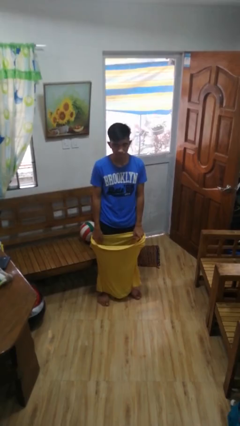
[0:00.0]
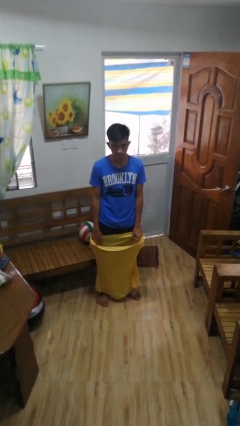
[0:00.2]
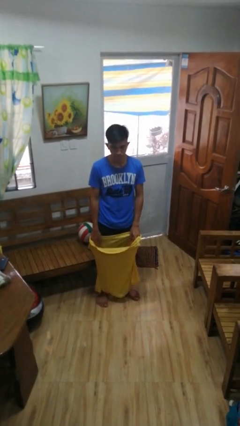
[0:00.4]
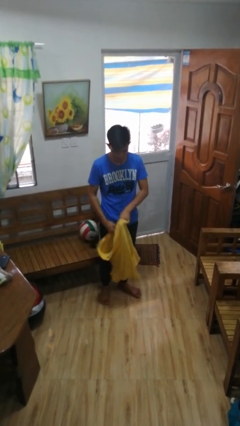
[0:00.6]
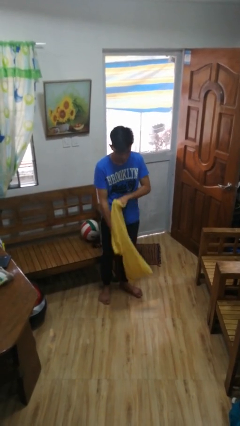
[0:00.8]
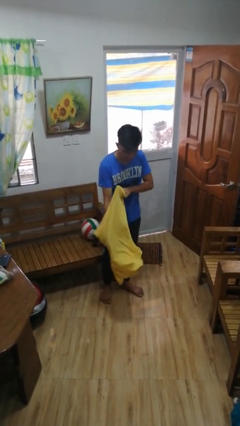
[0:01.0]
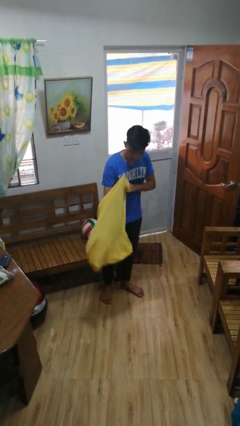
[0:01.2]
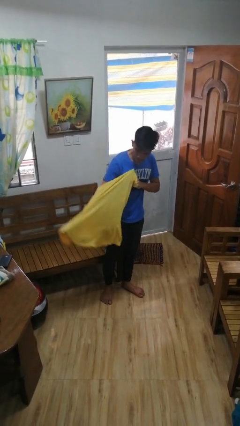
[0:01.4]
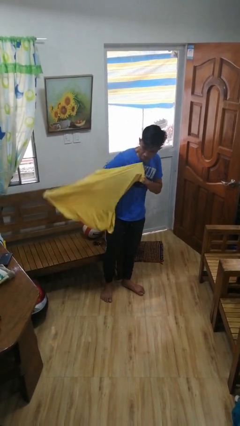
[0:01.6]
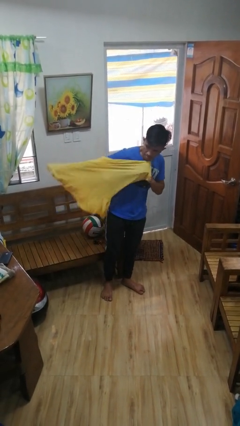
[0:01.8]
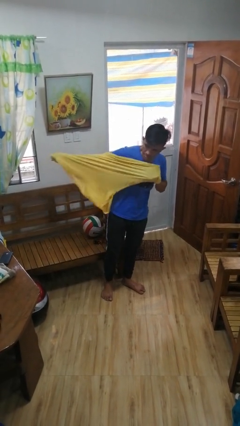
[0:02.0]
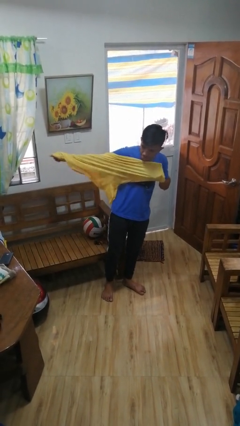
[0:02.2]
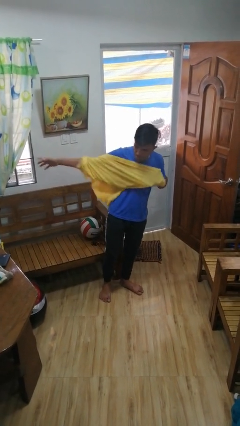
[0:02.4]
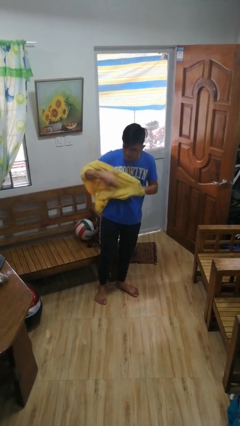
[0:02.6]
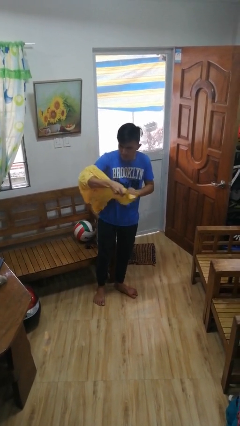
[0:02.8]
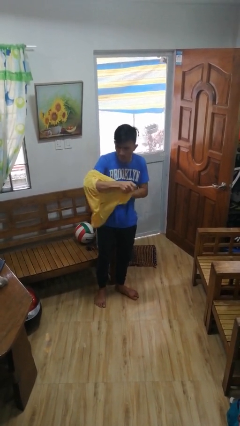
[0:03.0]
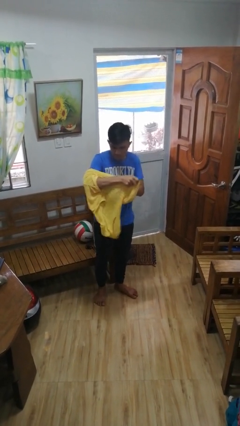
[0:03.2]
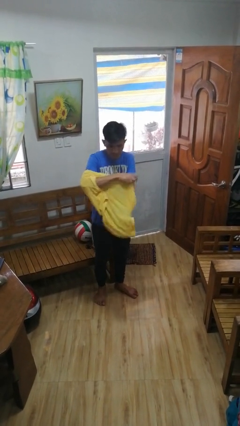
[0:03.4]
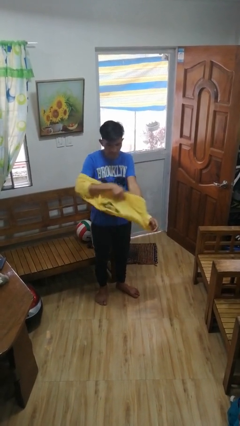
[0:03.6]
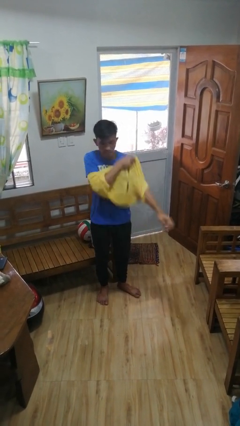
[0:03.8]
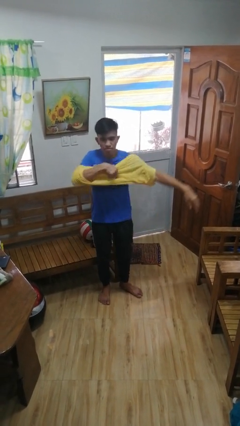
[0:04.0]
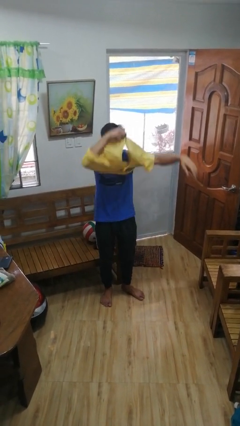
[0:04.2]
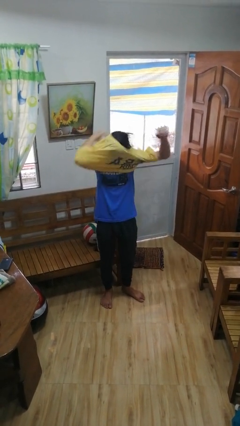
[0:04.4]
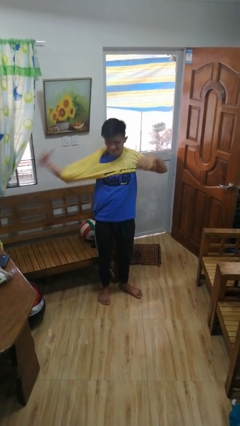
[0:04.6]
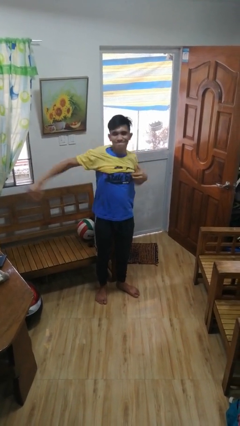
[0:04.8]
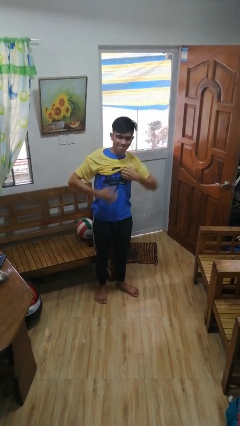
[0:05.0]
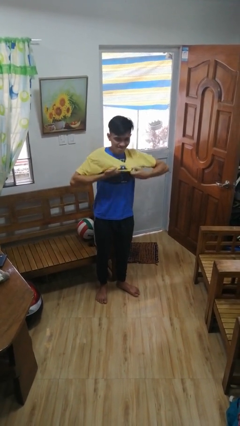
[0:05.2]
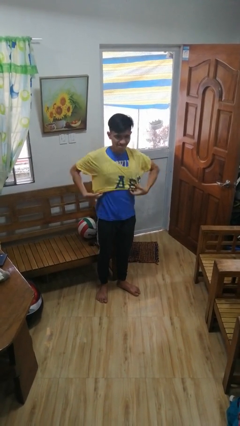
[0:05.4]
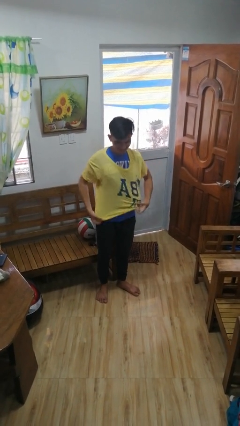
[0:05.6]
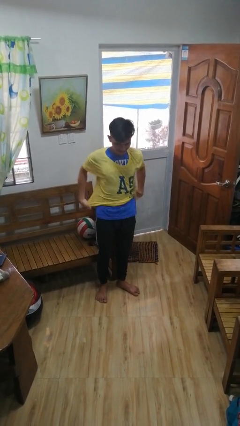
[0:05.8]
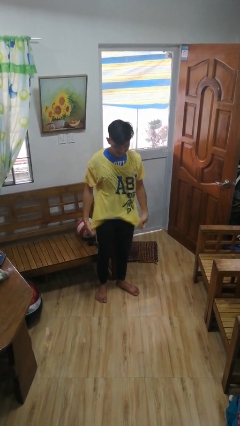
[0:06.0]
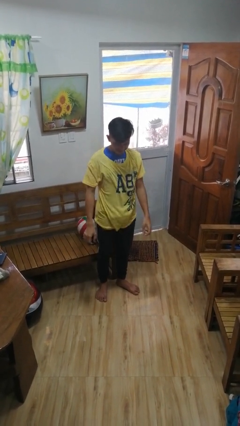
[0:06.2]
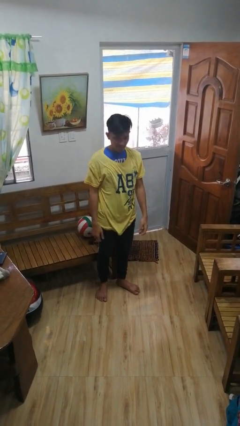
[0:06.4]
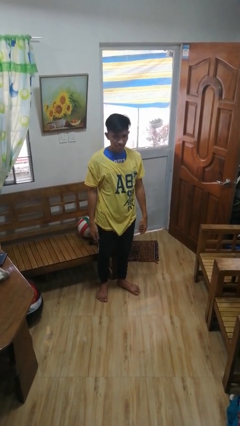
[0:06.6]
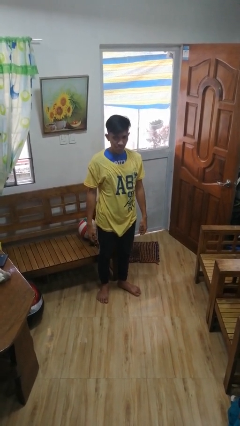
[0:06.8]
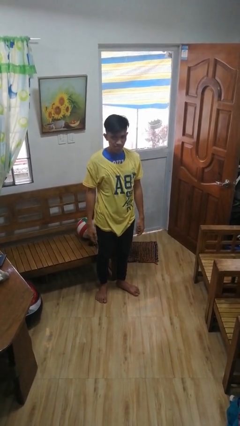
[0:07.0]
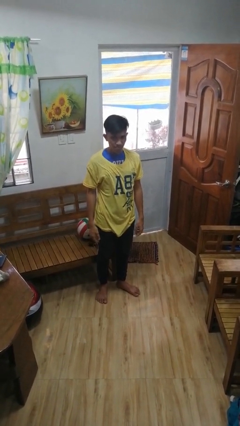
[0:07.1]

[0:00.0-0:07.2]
person puts on shirt

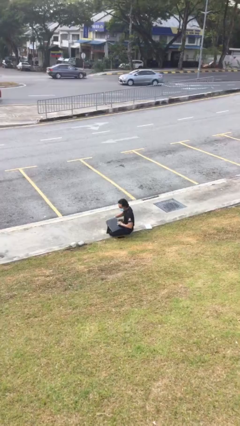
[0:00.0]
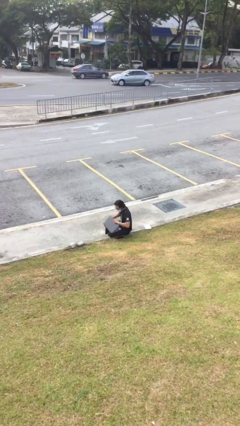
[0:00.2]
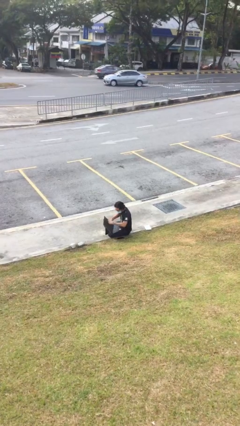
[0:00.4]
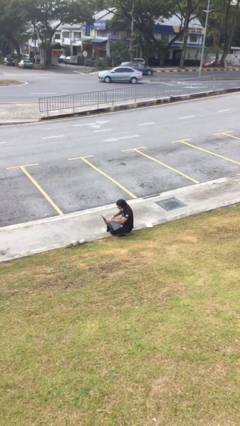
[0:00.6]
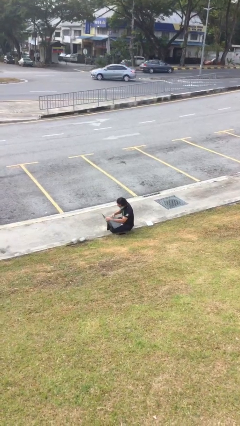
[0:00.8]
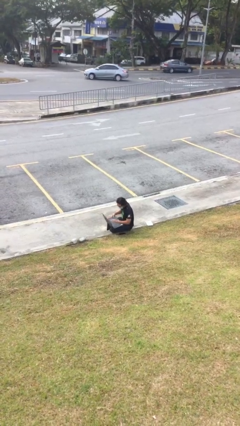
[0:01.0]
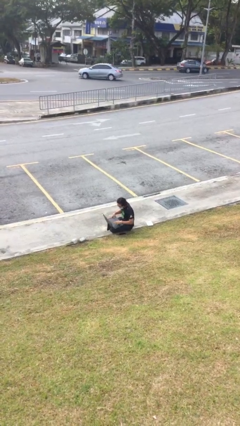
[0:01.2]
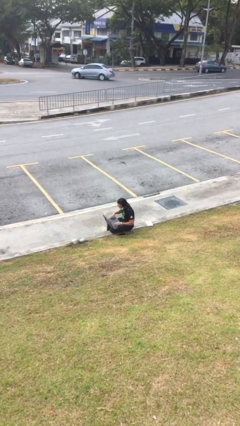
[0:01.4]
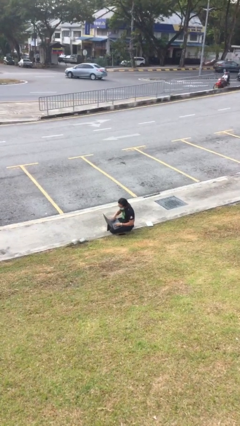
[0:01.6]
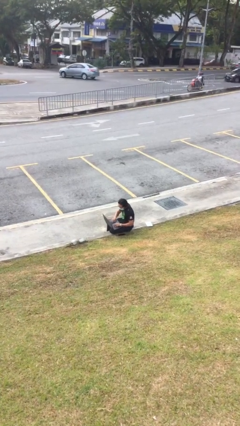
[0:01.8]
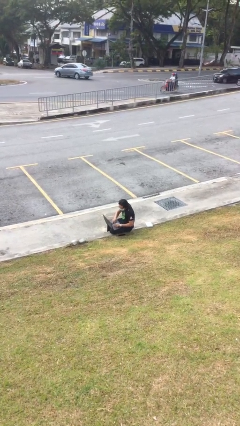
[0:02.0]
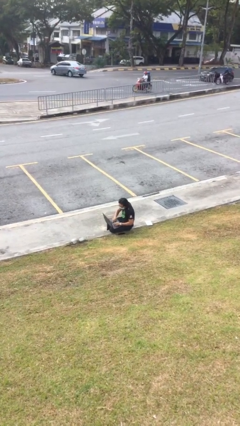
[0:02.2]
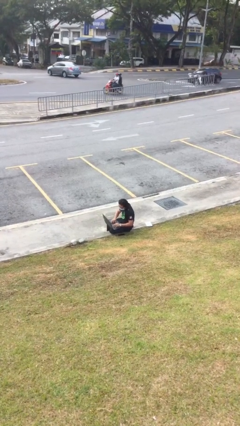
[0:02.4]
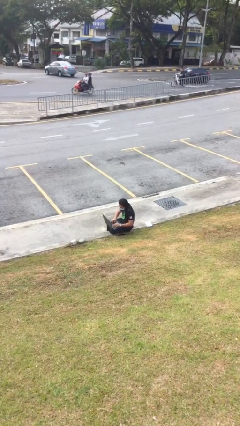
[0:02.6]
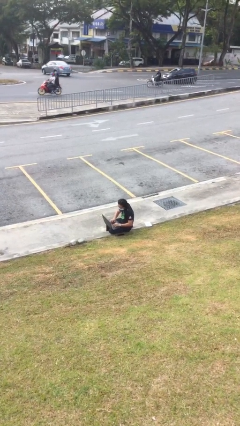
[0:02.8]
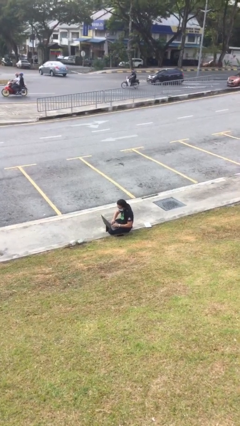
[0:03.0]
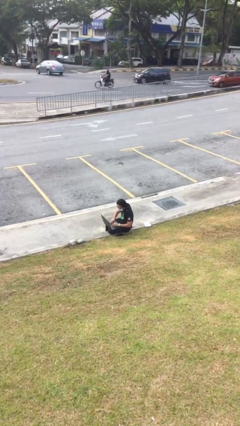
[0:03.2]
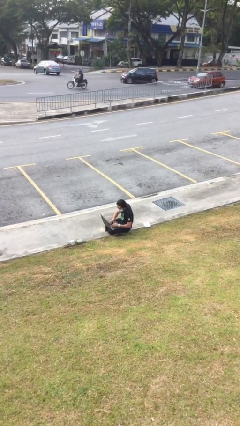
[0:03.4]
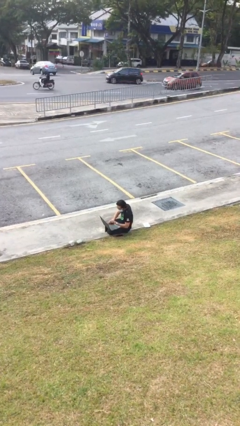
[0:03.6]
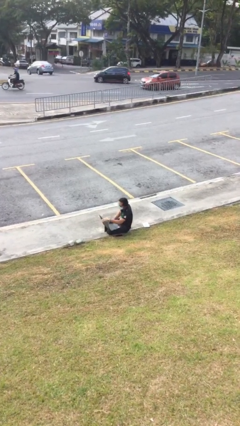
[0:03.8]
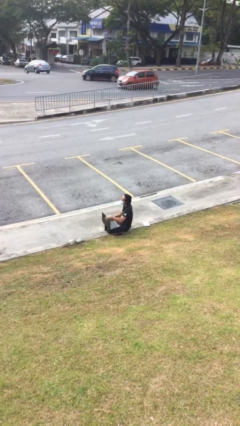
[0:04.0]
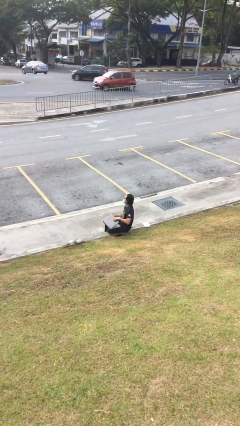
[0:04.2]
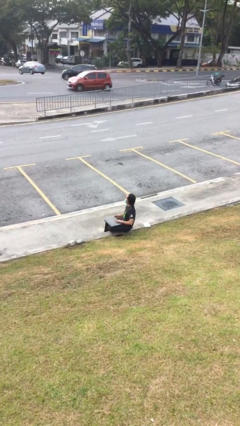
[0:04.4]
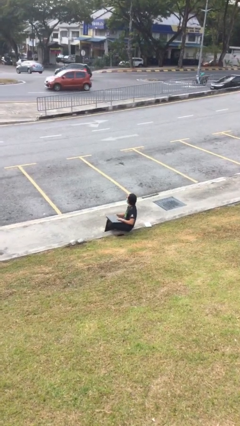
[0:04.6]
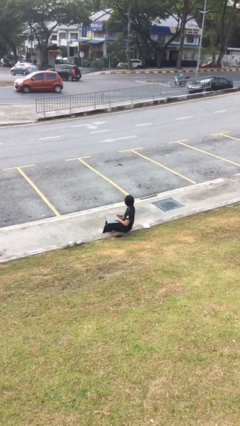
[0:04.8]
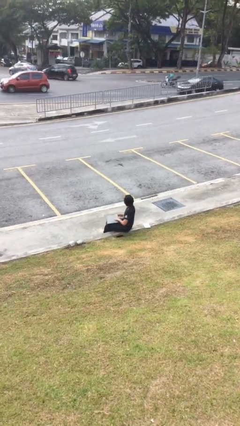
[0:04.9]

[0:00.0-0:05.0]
person interacts with laptop

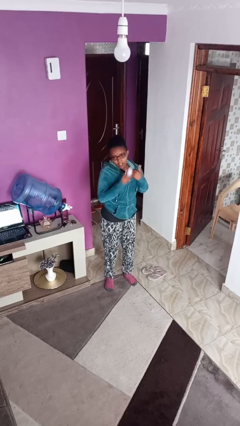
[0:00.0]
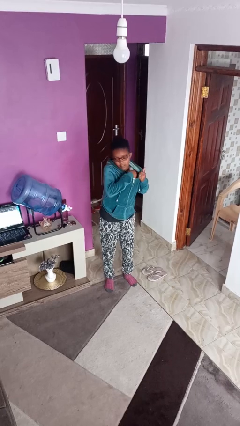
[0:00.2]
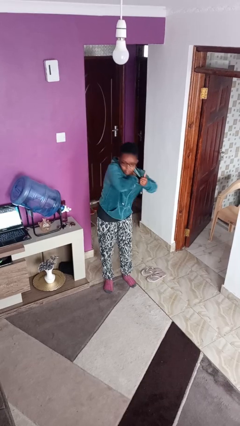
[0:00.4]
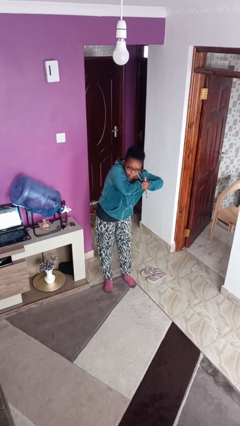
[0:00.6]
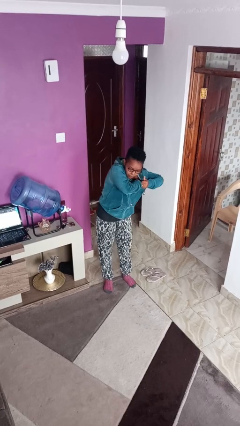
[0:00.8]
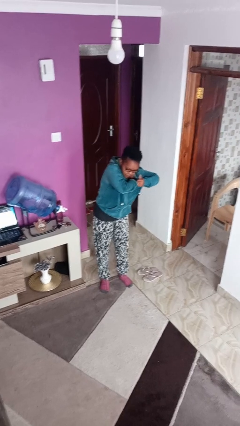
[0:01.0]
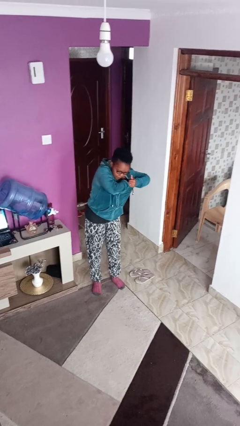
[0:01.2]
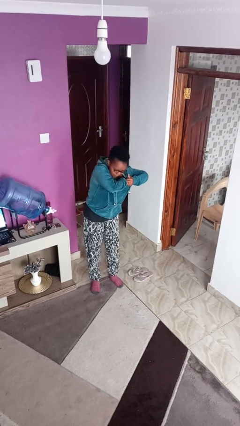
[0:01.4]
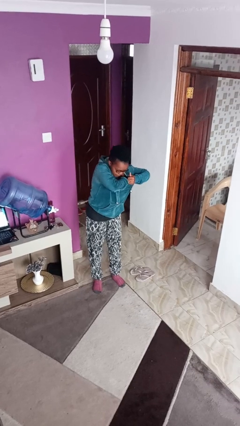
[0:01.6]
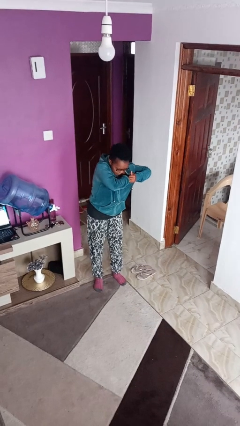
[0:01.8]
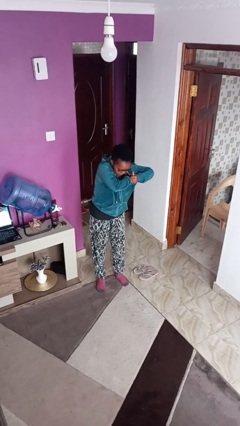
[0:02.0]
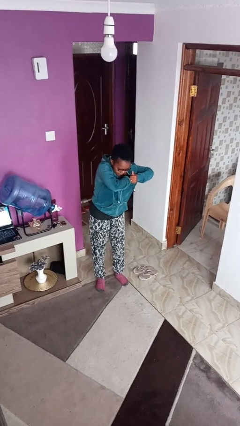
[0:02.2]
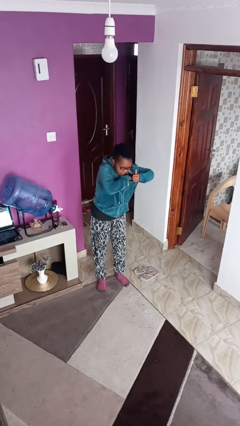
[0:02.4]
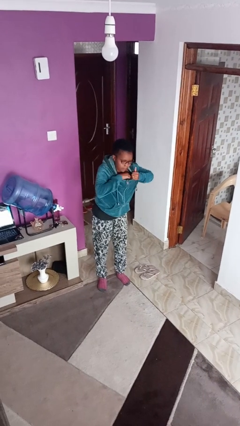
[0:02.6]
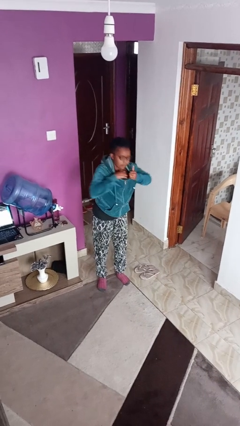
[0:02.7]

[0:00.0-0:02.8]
person applies deodorant

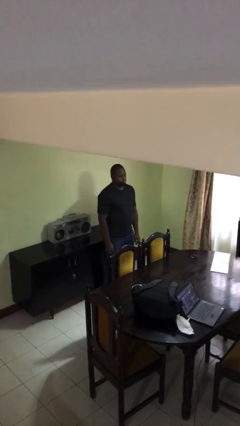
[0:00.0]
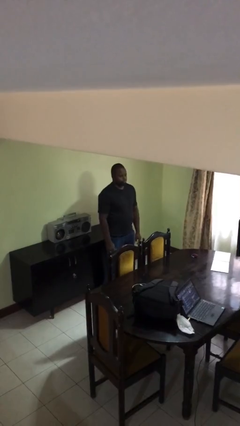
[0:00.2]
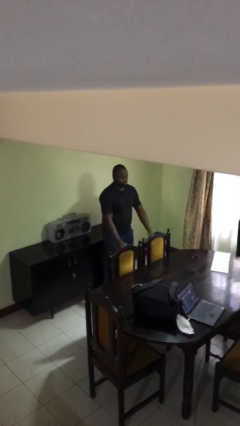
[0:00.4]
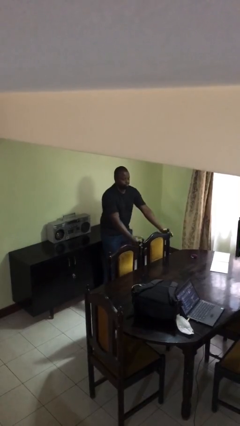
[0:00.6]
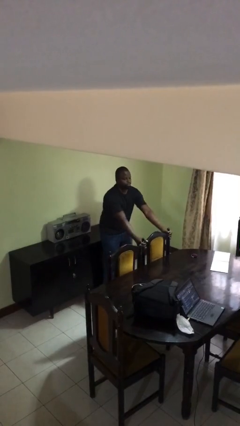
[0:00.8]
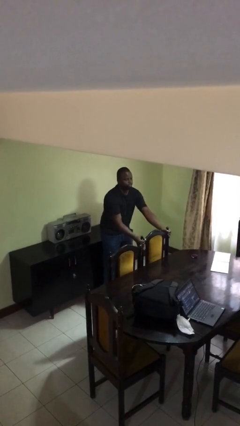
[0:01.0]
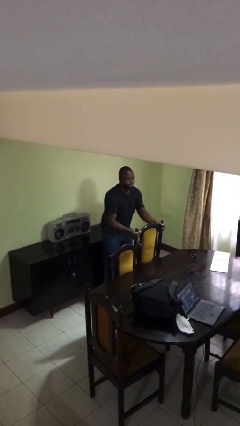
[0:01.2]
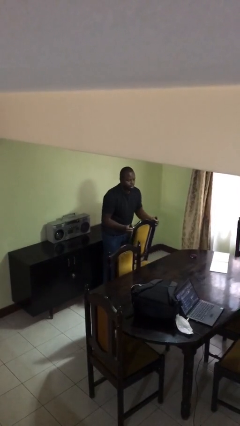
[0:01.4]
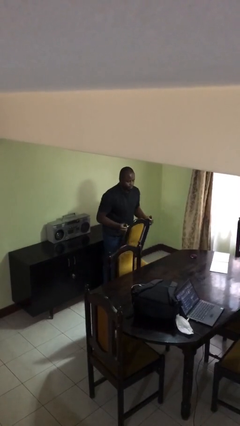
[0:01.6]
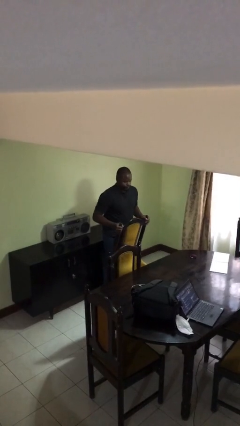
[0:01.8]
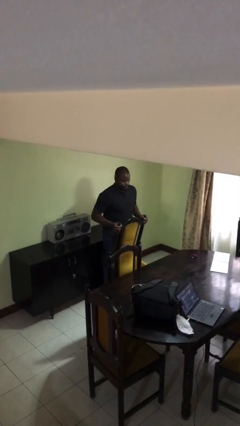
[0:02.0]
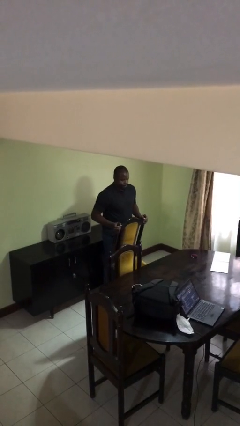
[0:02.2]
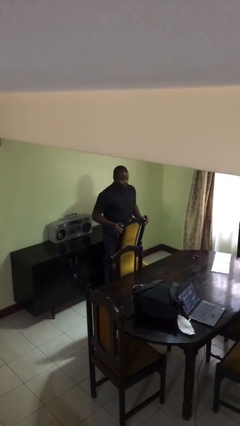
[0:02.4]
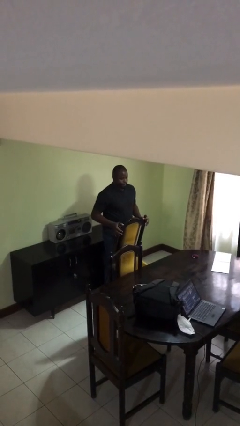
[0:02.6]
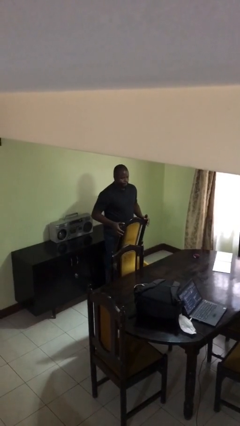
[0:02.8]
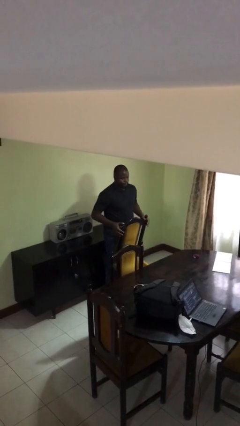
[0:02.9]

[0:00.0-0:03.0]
person pulls out chair
